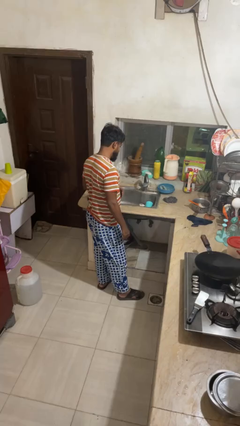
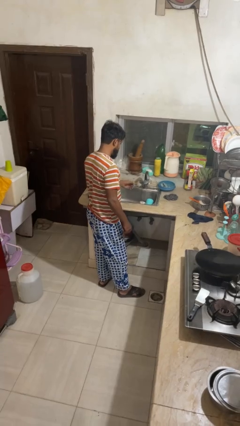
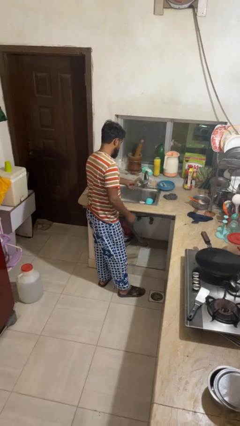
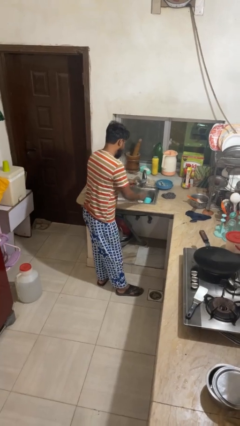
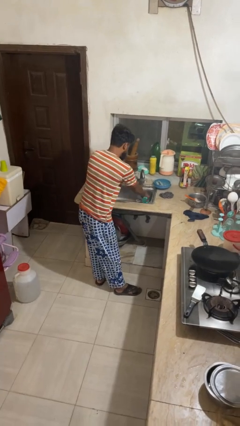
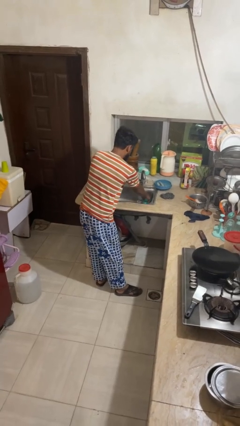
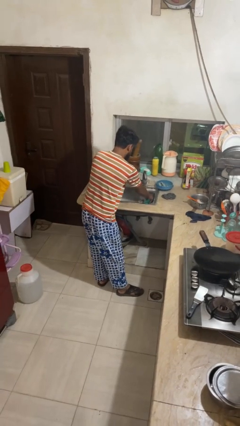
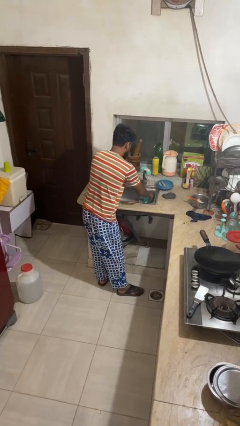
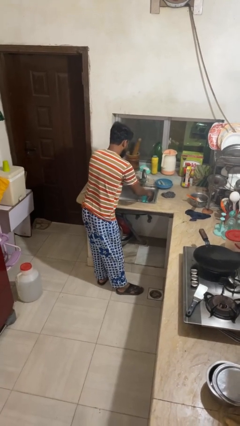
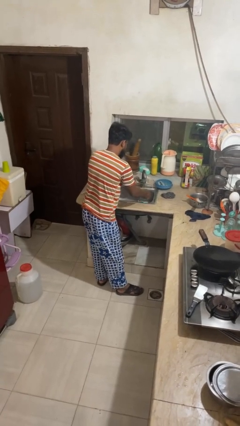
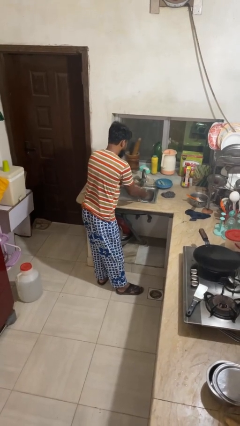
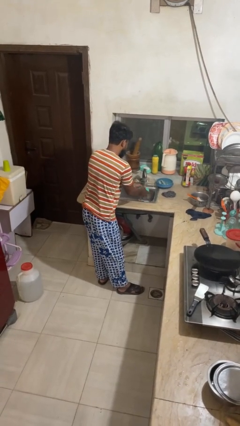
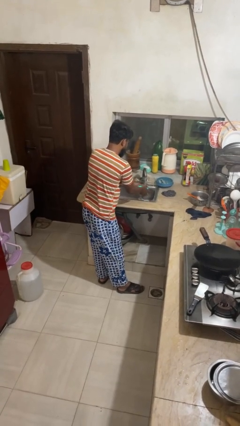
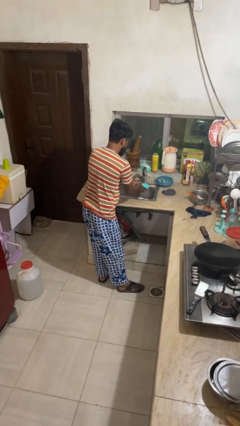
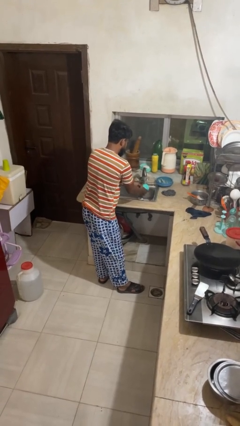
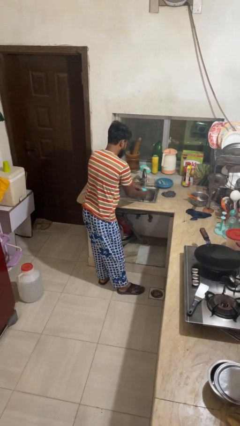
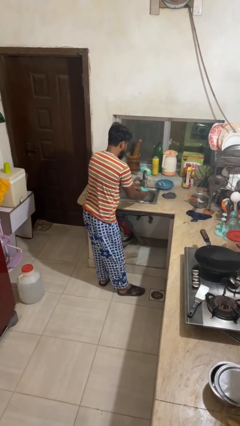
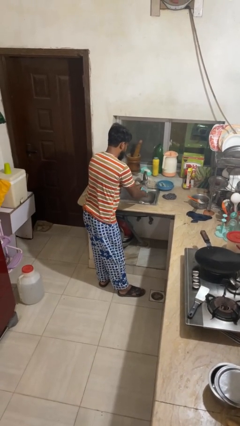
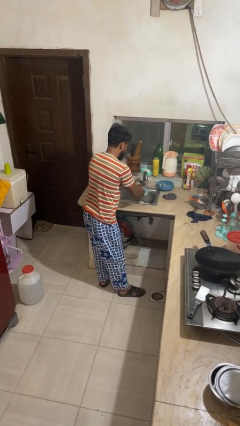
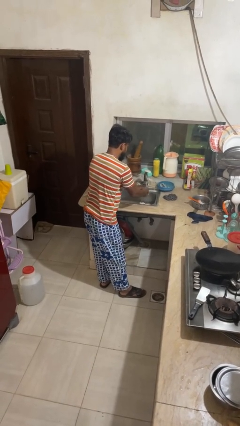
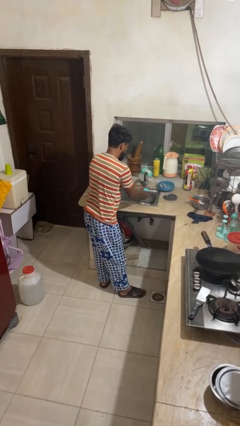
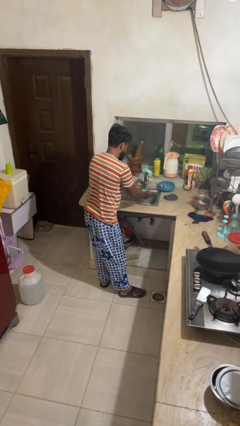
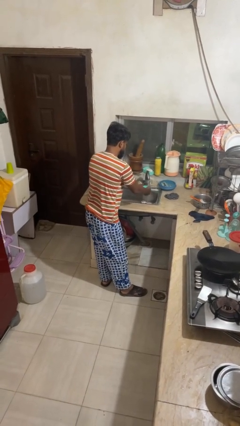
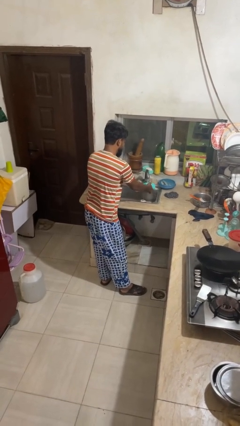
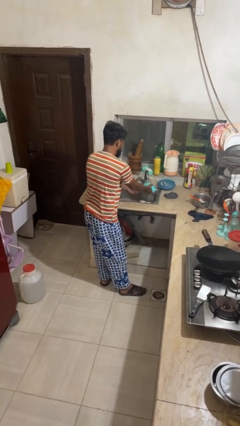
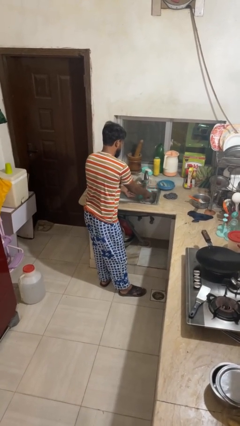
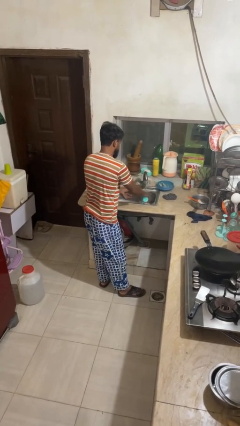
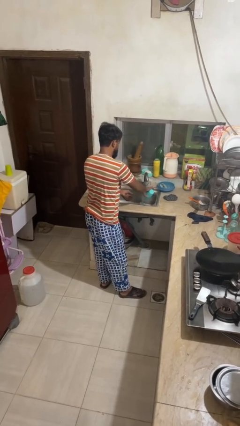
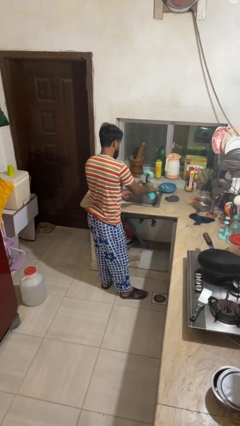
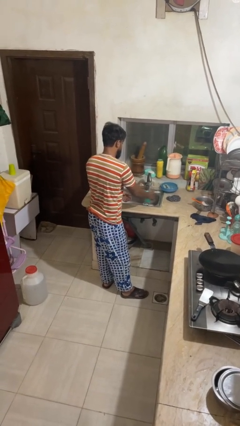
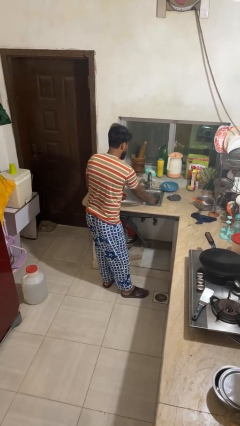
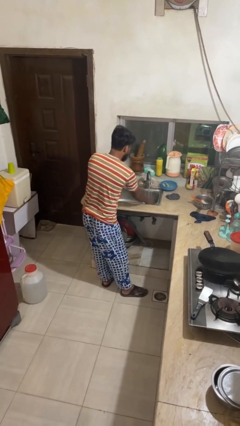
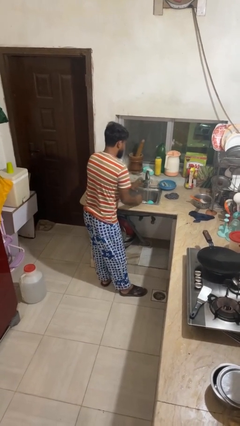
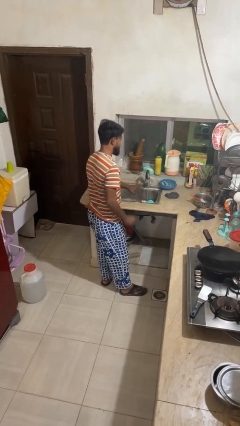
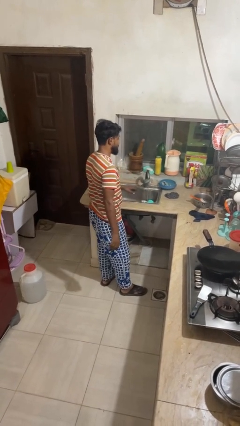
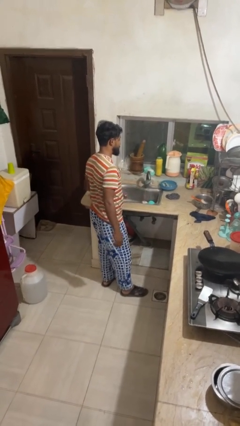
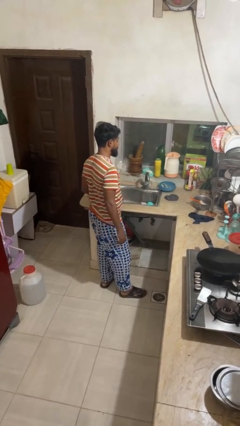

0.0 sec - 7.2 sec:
person washes dish

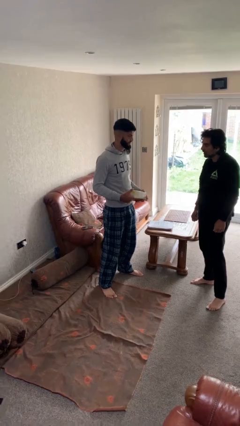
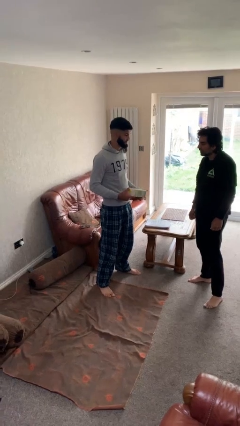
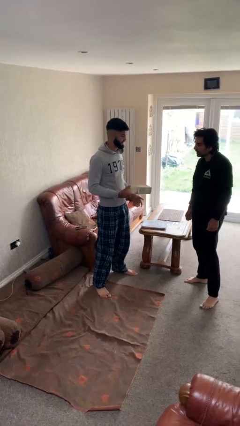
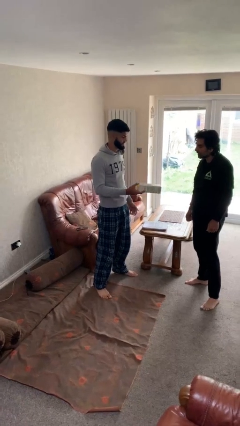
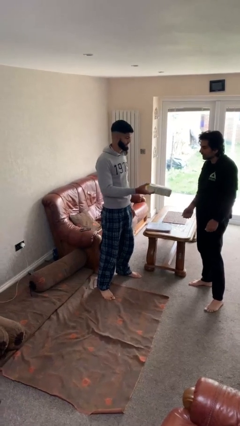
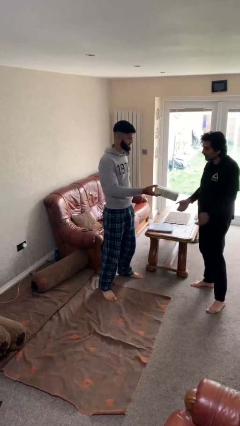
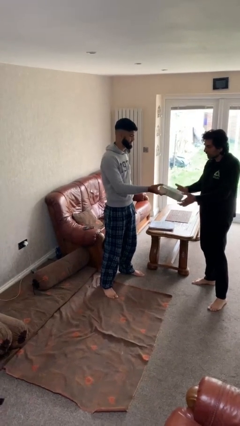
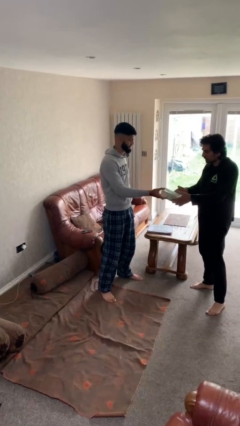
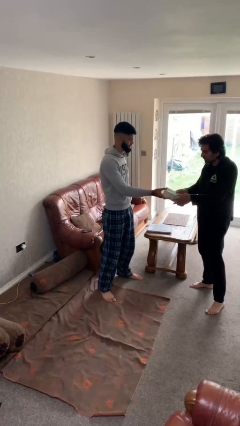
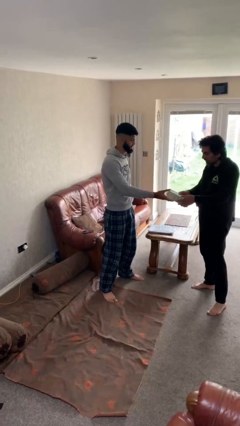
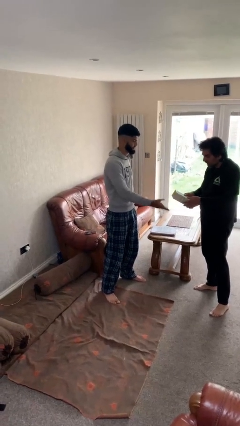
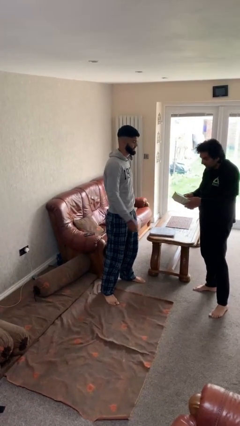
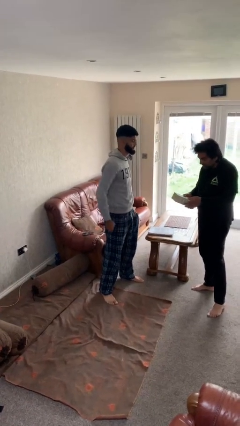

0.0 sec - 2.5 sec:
person transfers object to person

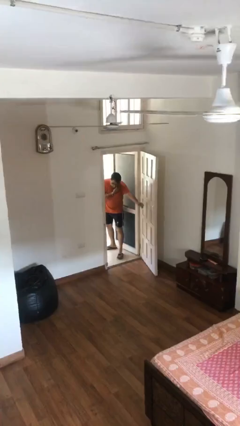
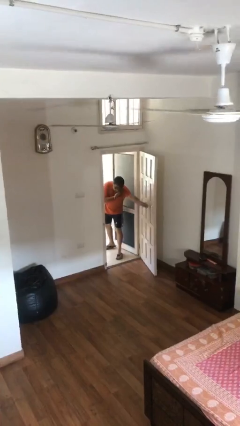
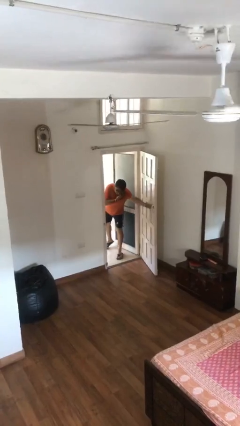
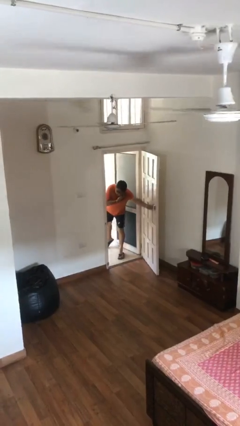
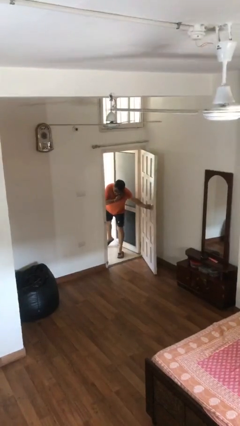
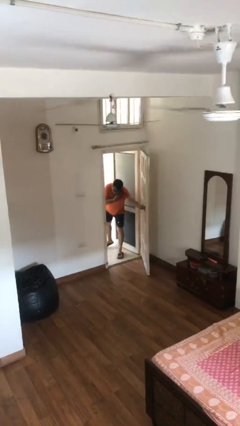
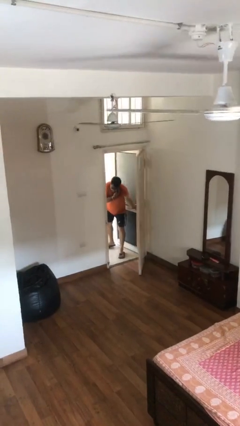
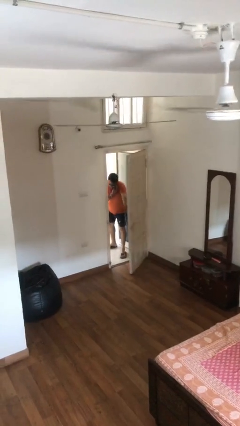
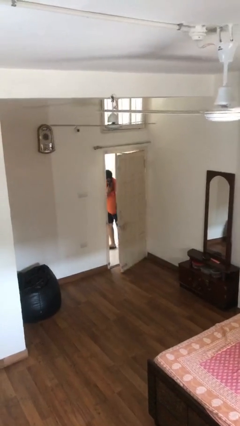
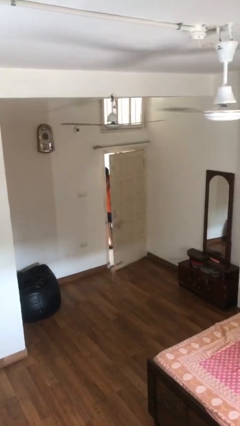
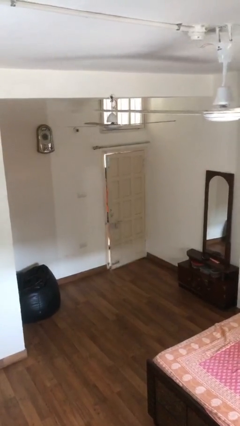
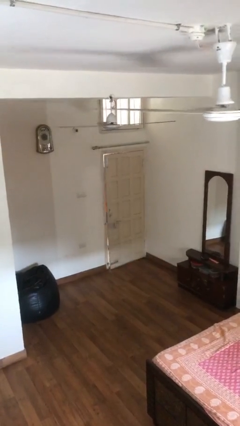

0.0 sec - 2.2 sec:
person closes facility door

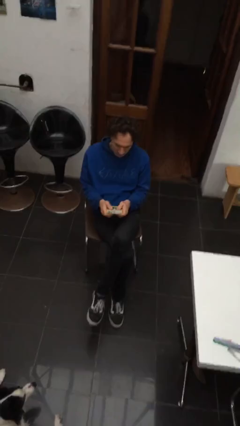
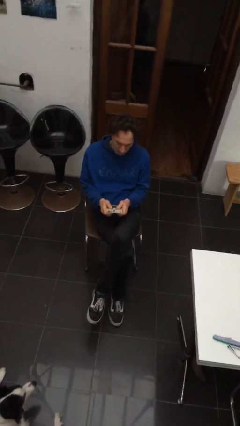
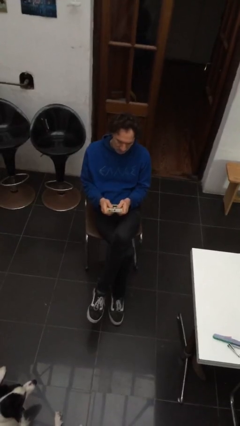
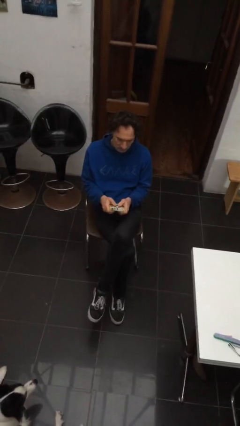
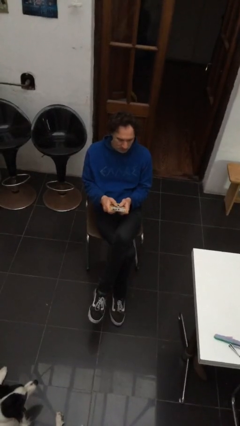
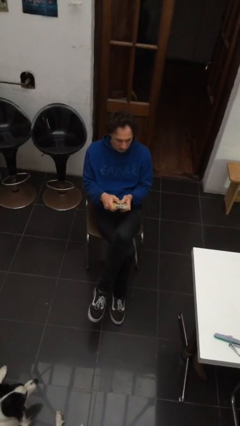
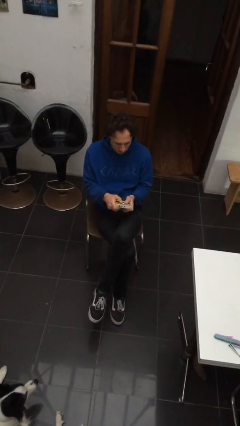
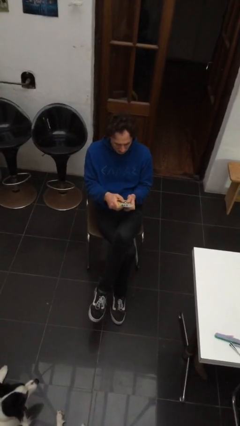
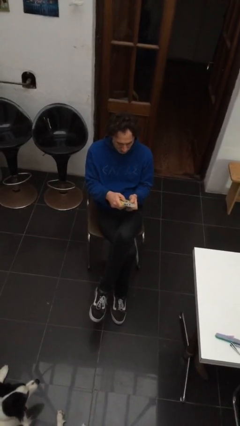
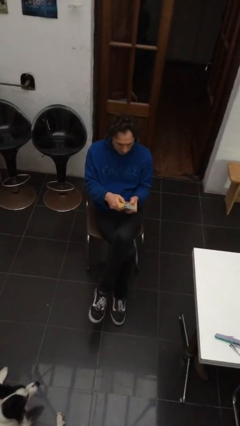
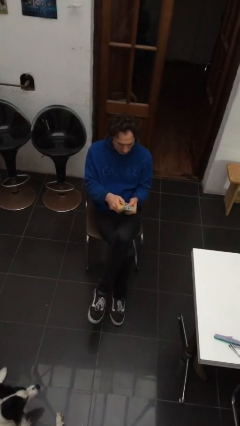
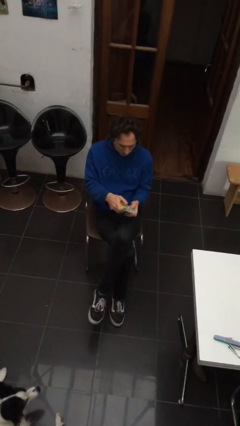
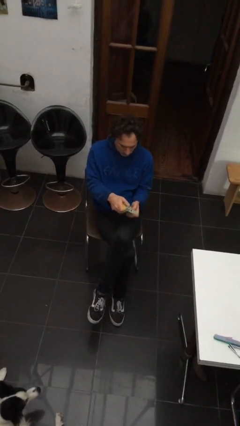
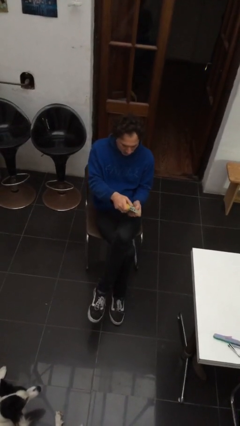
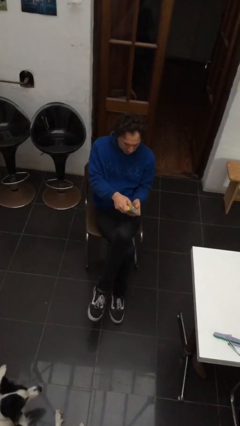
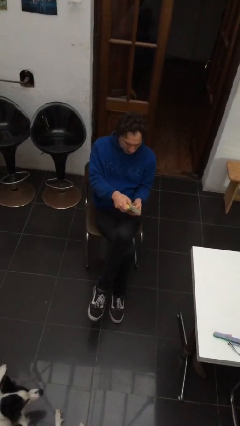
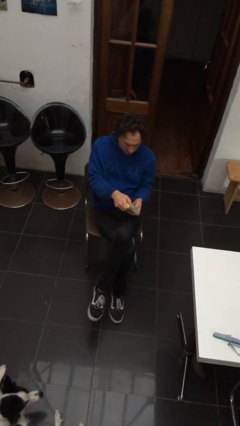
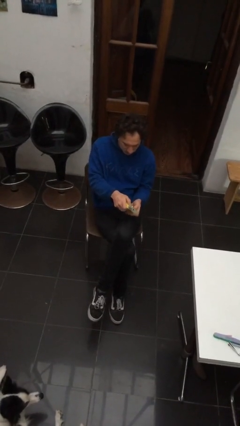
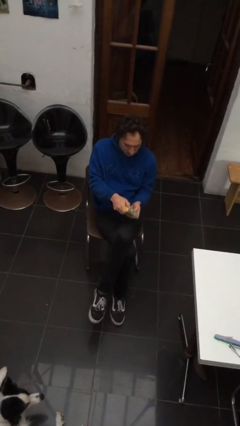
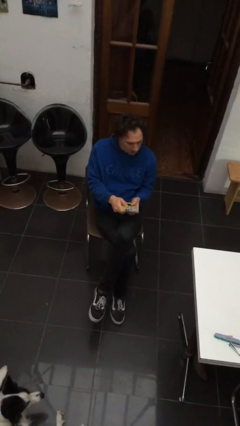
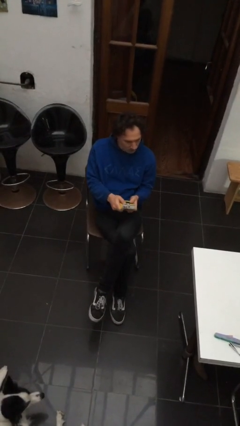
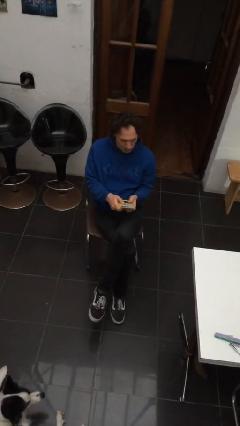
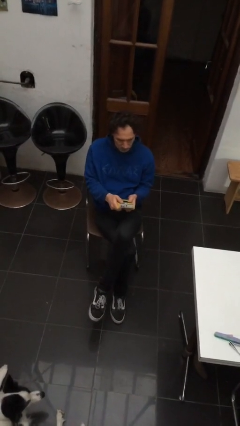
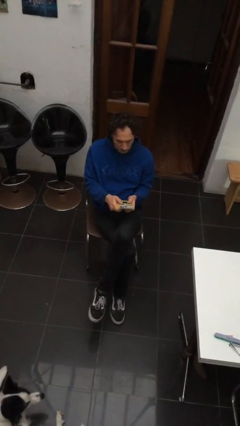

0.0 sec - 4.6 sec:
person interacts with handheld game

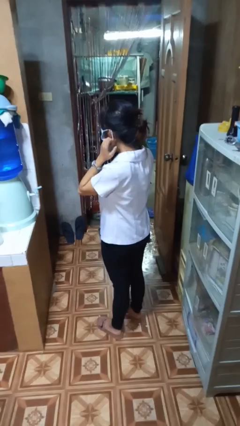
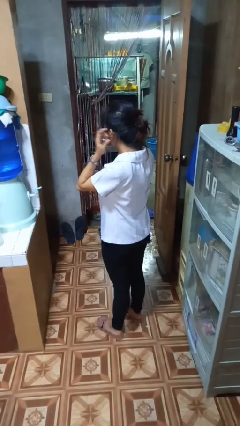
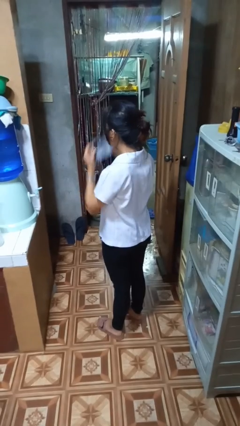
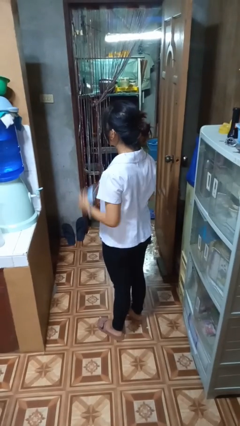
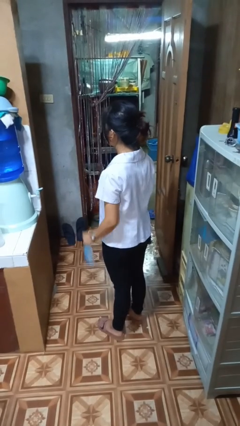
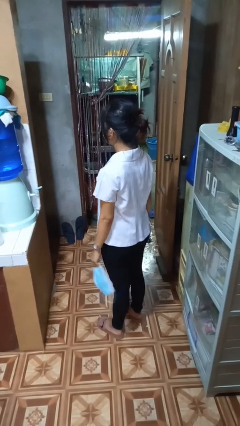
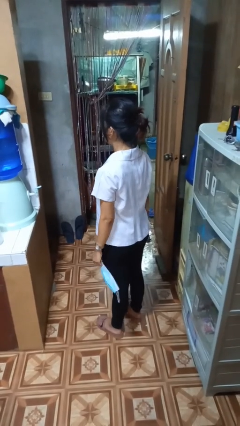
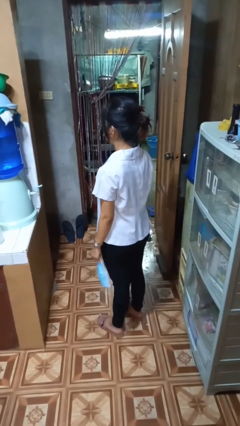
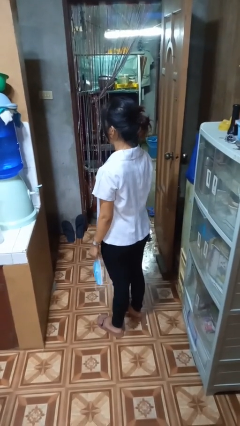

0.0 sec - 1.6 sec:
person takes off facemask
